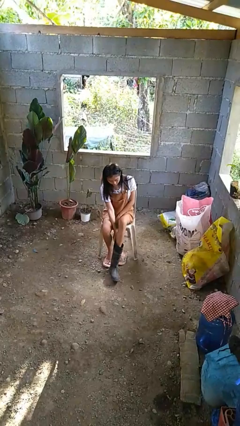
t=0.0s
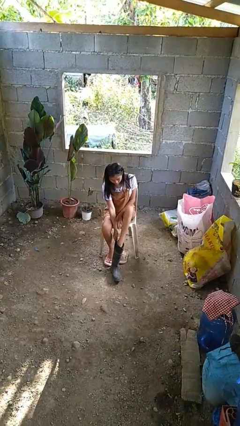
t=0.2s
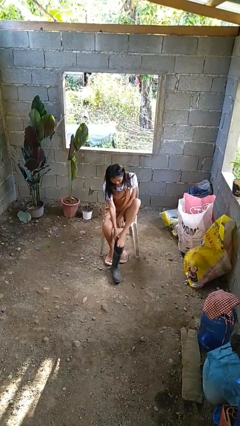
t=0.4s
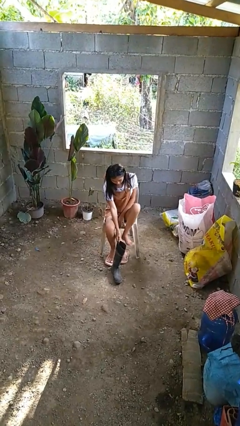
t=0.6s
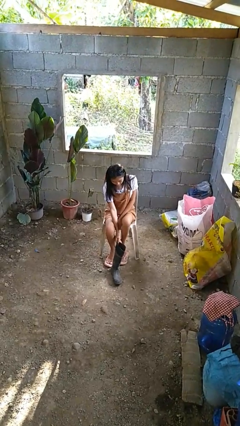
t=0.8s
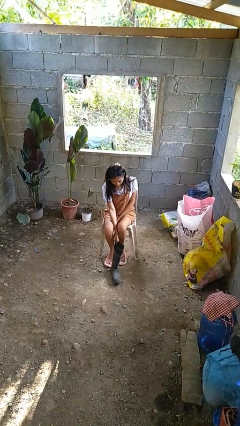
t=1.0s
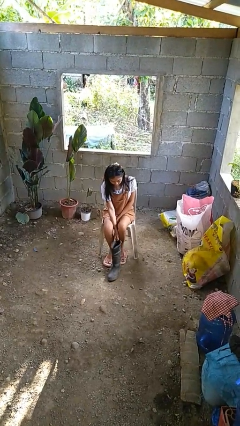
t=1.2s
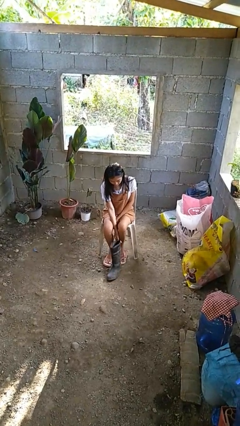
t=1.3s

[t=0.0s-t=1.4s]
person takes off boots

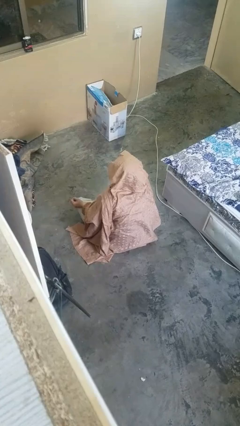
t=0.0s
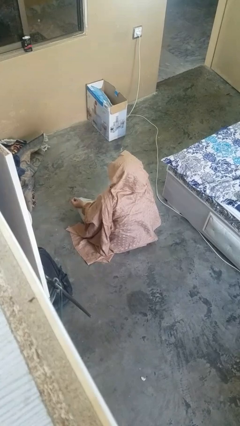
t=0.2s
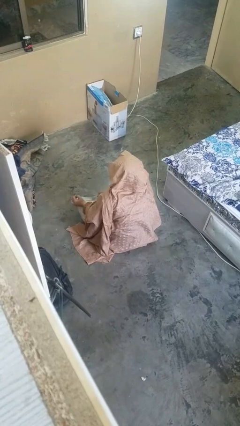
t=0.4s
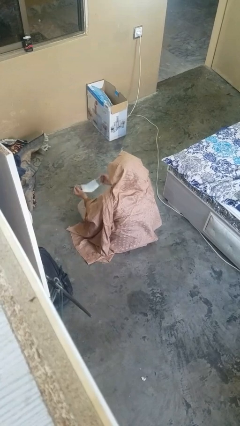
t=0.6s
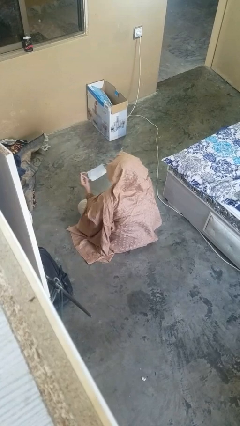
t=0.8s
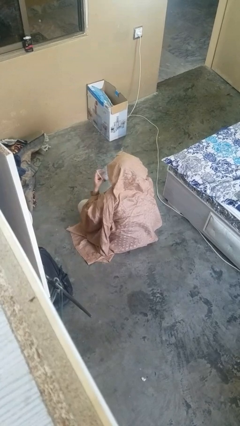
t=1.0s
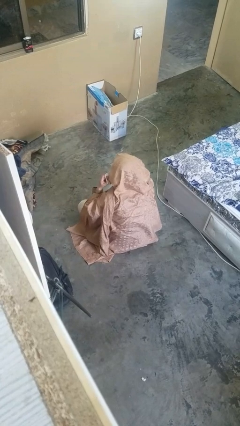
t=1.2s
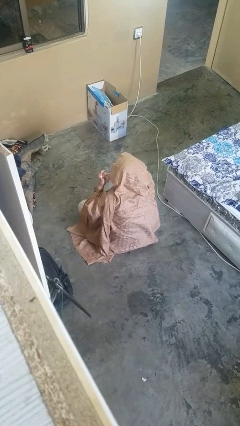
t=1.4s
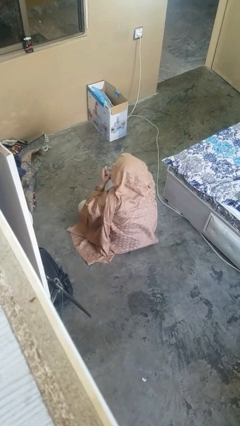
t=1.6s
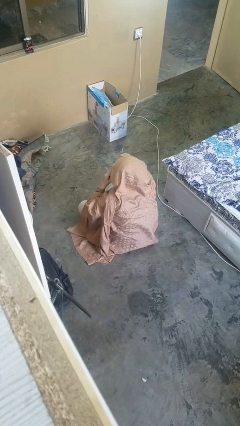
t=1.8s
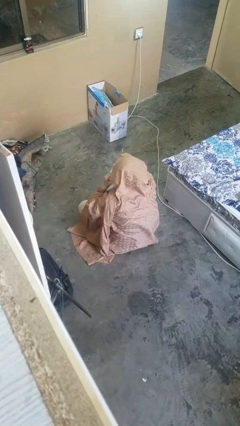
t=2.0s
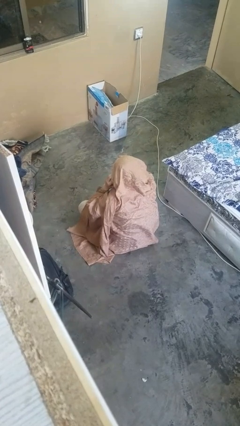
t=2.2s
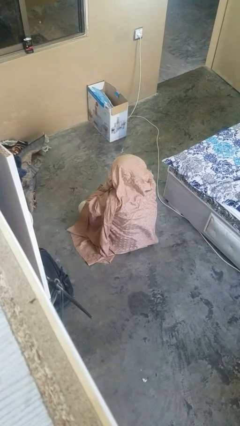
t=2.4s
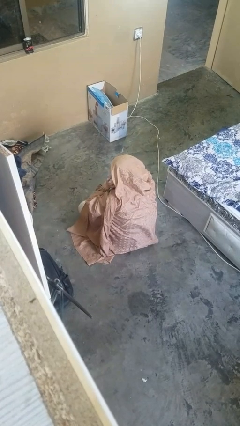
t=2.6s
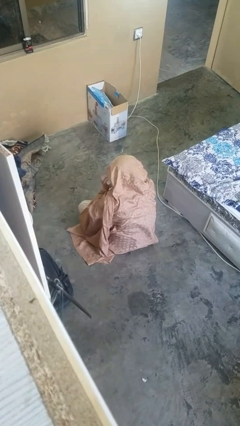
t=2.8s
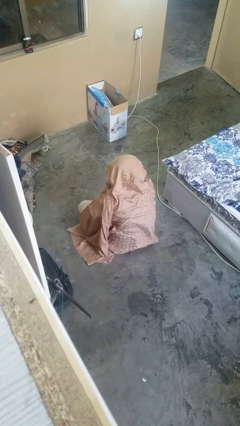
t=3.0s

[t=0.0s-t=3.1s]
person puts on facemask

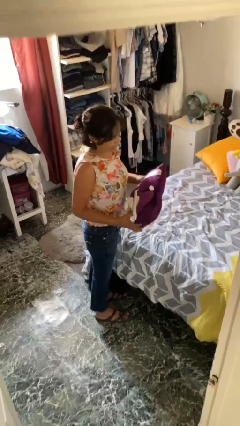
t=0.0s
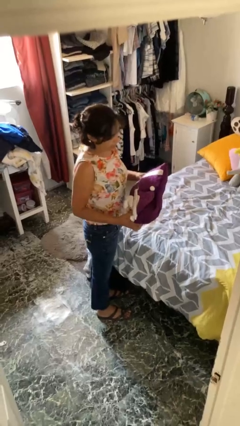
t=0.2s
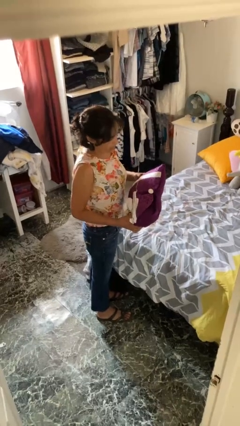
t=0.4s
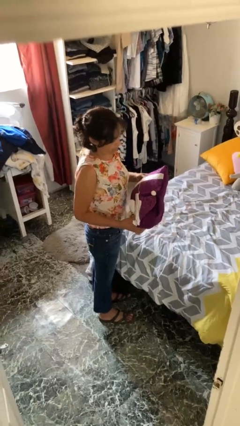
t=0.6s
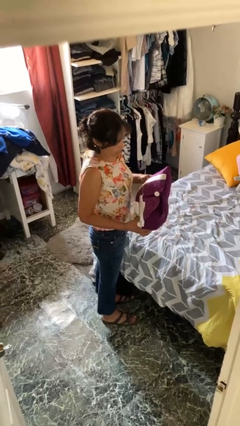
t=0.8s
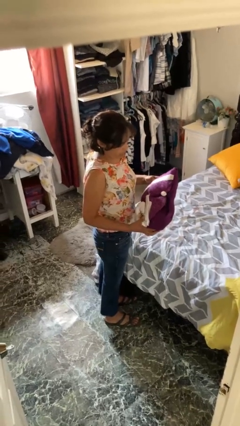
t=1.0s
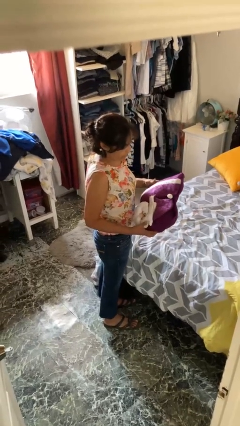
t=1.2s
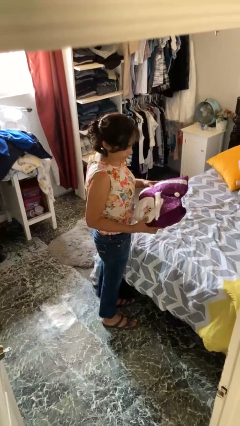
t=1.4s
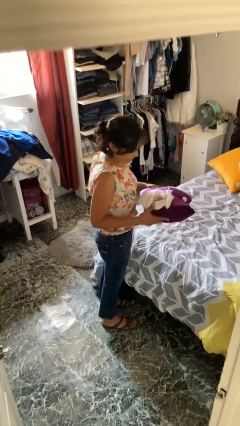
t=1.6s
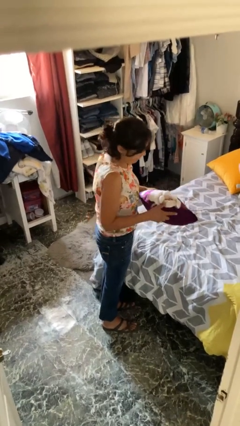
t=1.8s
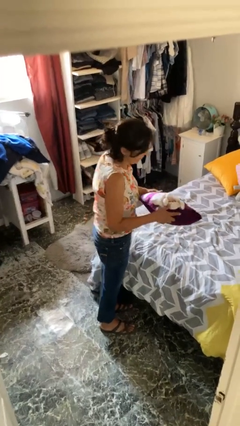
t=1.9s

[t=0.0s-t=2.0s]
person picks up object from bed

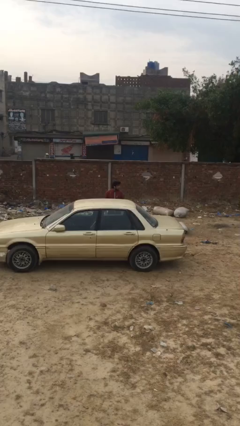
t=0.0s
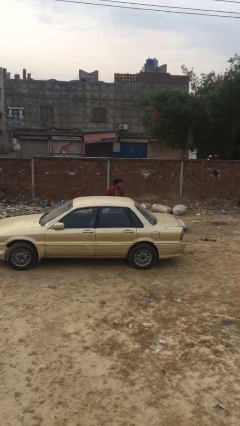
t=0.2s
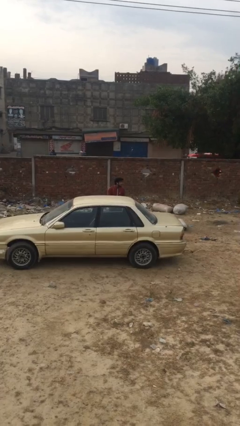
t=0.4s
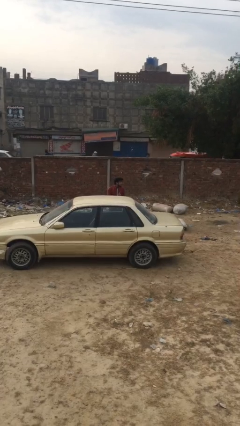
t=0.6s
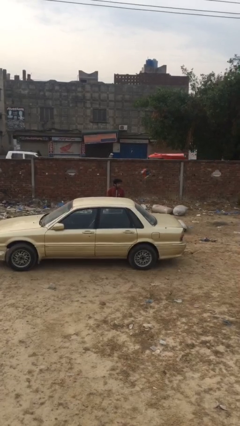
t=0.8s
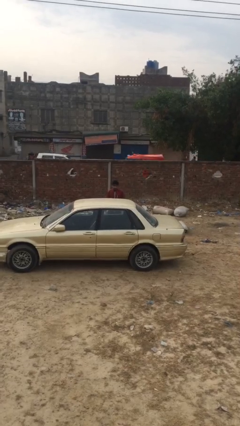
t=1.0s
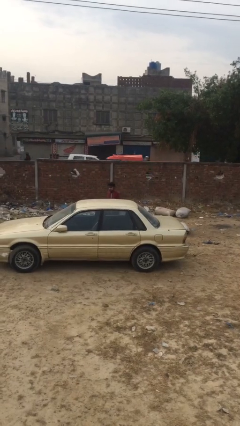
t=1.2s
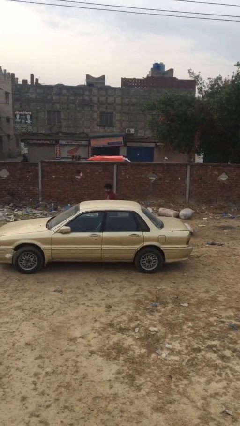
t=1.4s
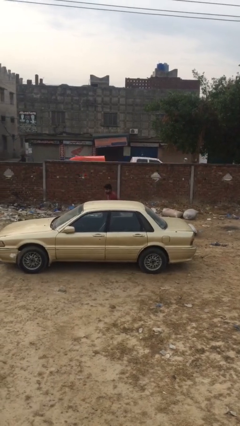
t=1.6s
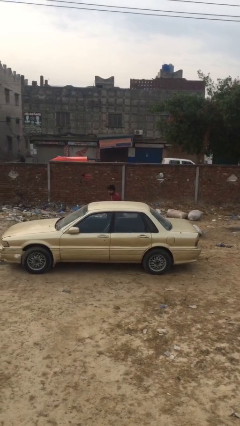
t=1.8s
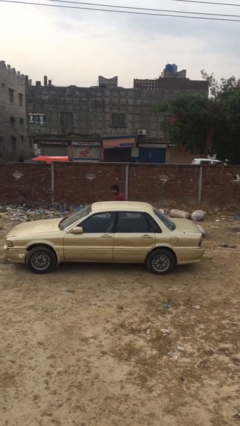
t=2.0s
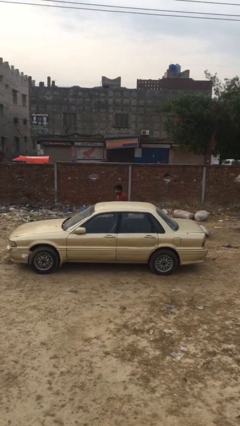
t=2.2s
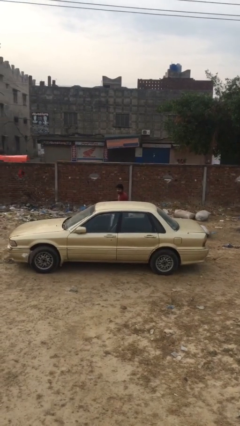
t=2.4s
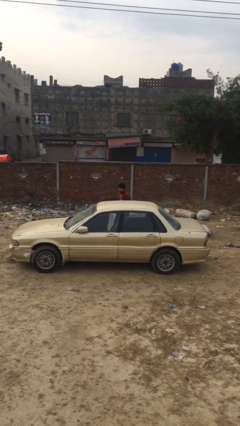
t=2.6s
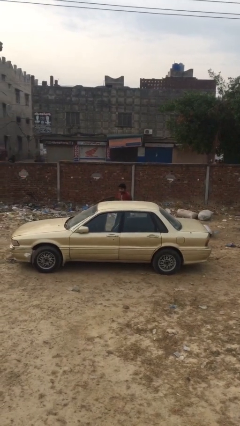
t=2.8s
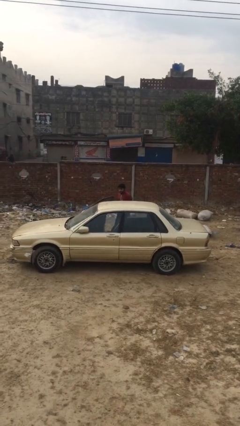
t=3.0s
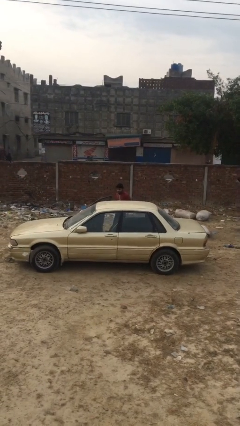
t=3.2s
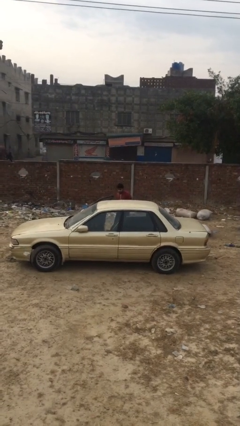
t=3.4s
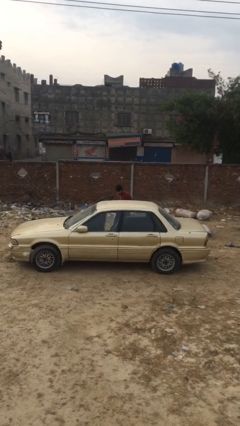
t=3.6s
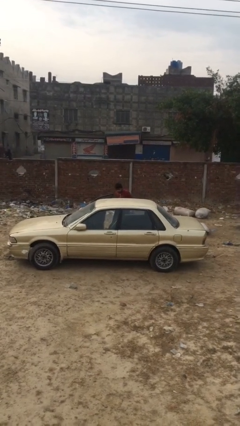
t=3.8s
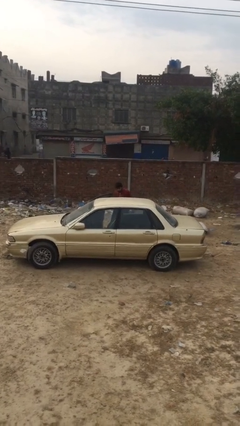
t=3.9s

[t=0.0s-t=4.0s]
person opens car door

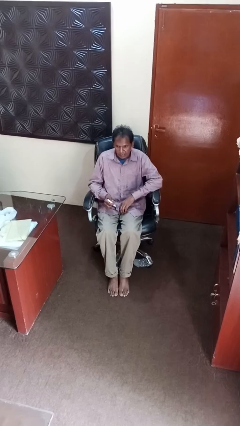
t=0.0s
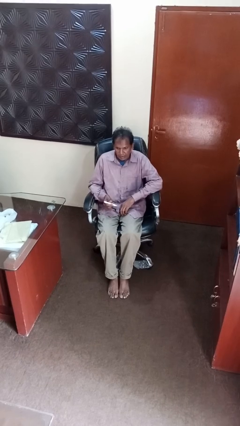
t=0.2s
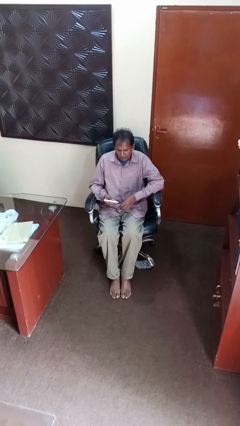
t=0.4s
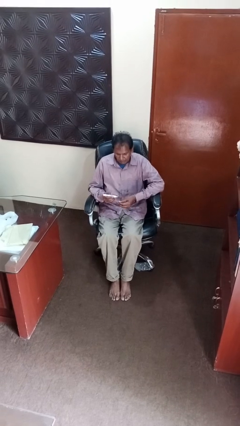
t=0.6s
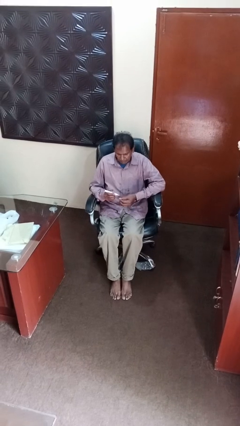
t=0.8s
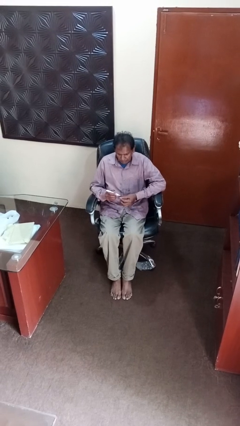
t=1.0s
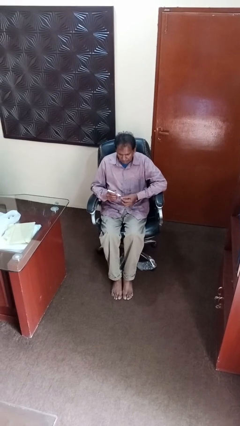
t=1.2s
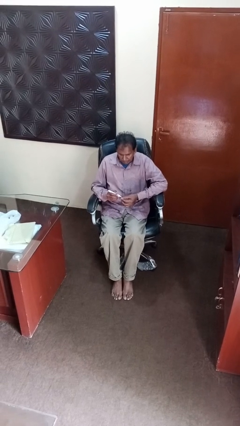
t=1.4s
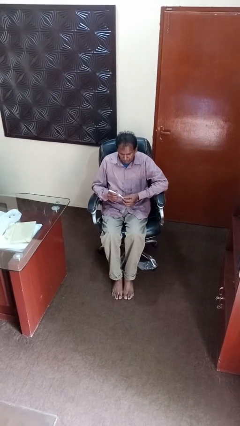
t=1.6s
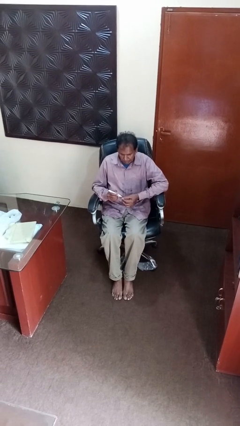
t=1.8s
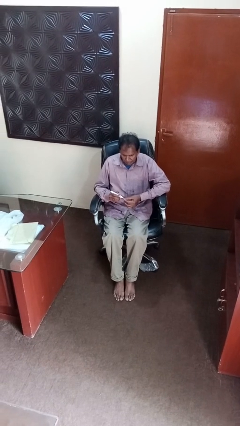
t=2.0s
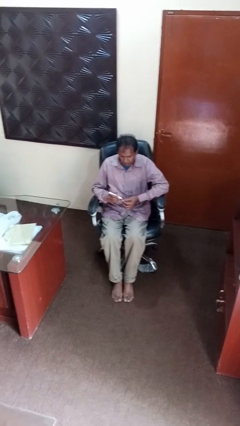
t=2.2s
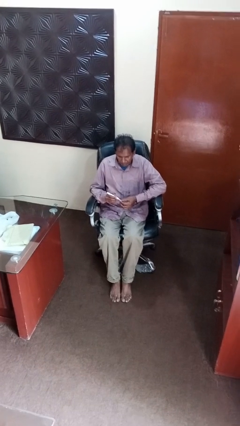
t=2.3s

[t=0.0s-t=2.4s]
person paints fingernails

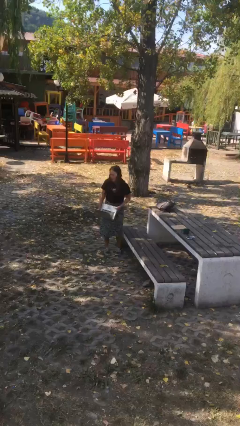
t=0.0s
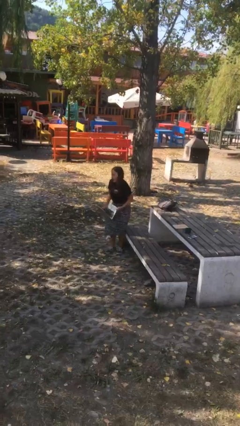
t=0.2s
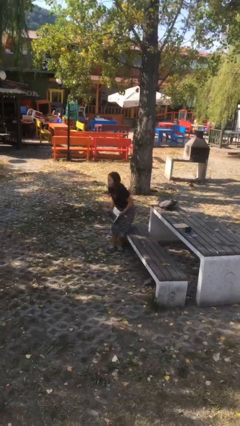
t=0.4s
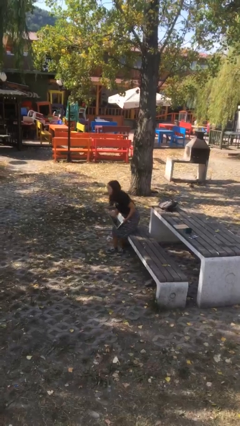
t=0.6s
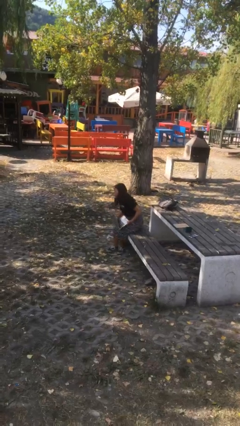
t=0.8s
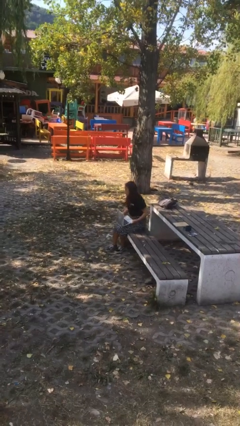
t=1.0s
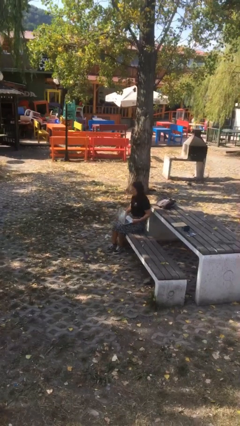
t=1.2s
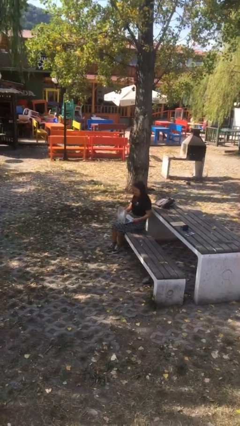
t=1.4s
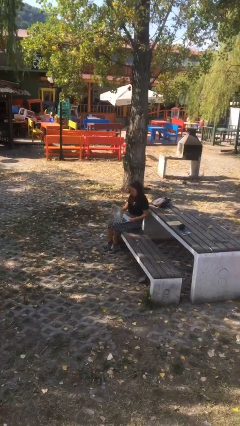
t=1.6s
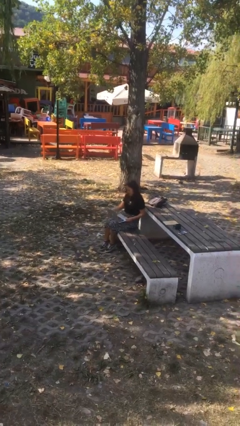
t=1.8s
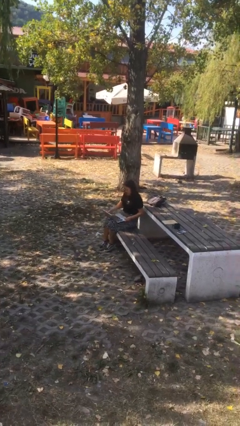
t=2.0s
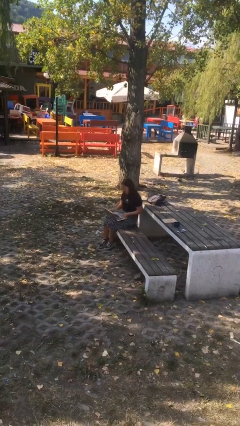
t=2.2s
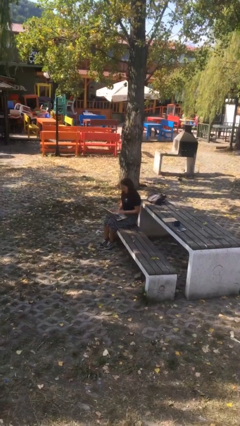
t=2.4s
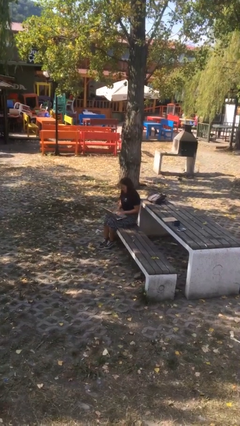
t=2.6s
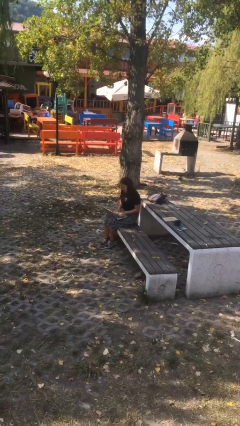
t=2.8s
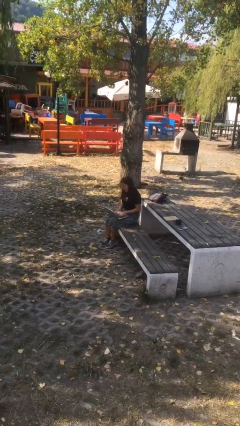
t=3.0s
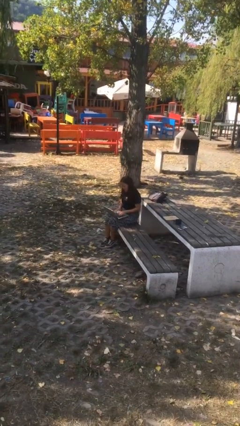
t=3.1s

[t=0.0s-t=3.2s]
person sits down

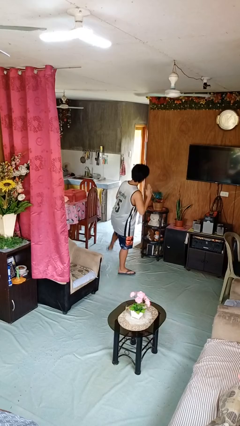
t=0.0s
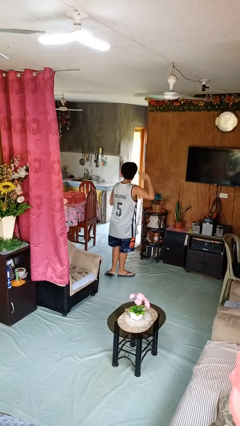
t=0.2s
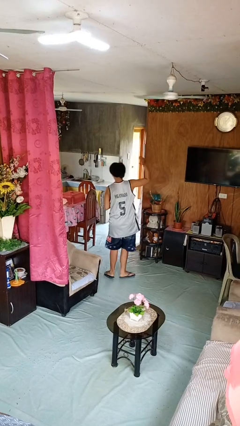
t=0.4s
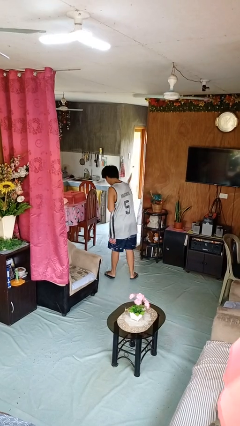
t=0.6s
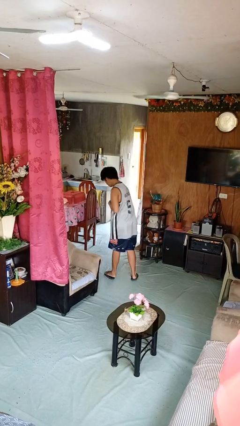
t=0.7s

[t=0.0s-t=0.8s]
person karate chop

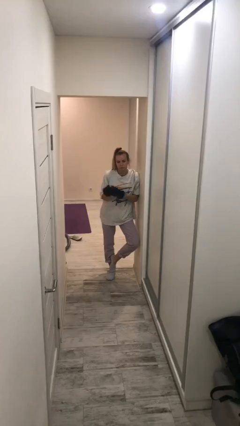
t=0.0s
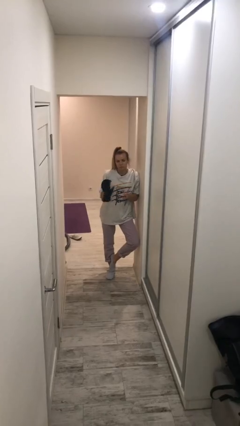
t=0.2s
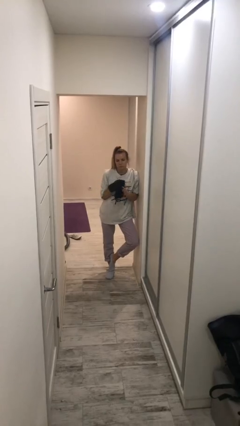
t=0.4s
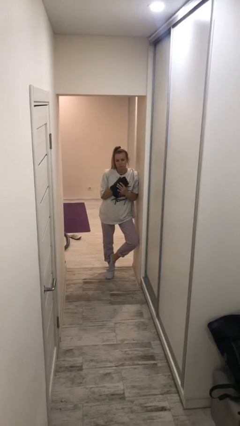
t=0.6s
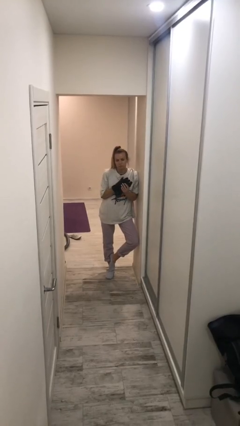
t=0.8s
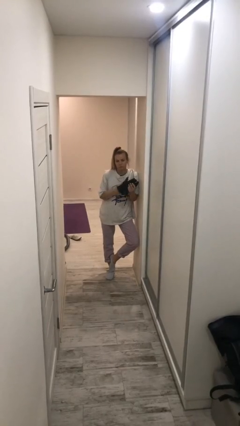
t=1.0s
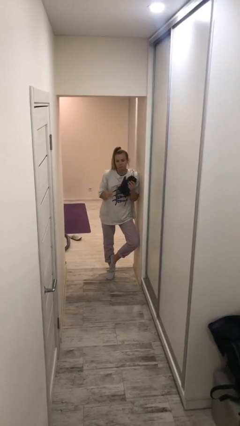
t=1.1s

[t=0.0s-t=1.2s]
person takes off gloves
